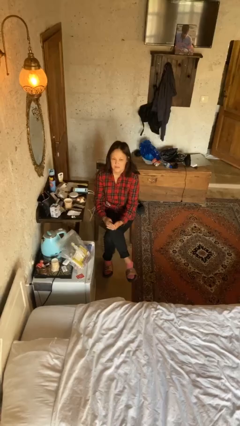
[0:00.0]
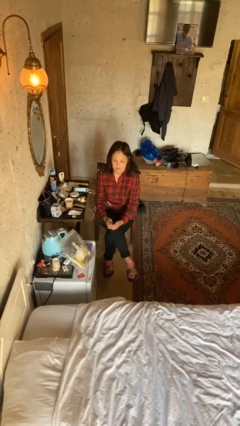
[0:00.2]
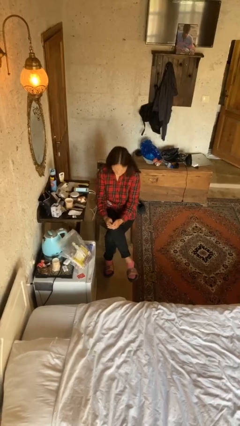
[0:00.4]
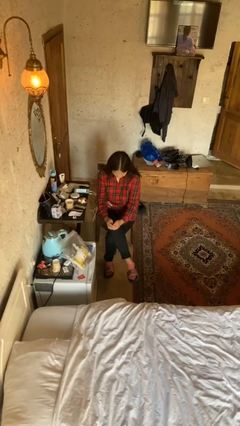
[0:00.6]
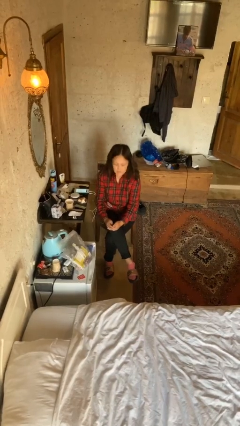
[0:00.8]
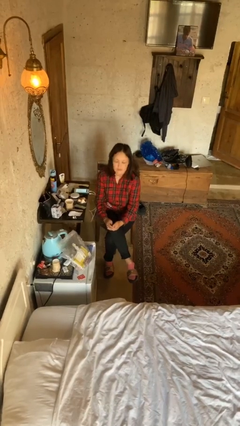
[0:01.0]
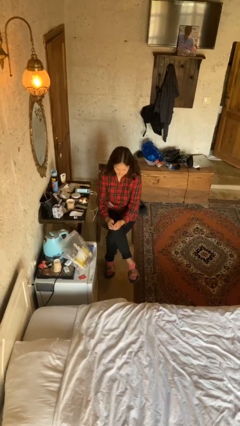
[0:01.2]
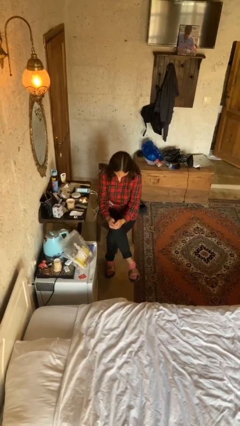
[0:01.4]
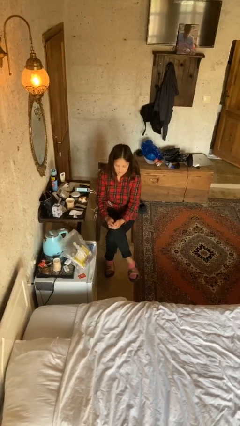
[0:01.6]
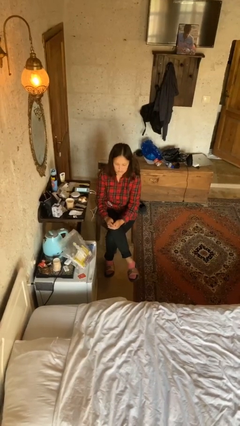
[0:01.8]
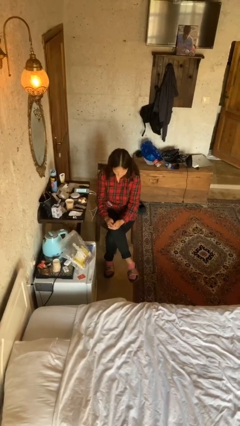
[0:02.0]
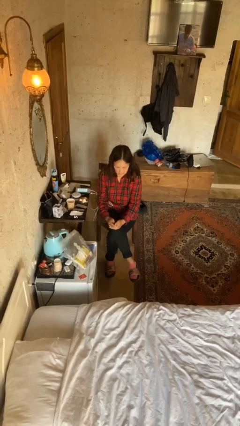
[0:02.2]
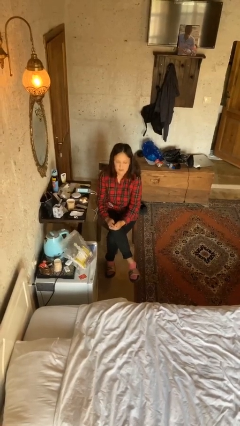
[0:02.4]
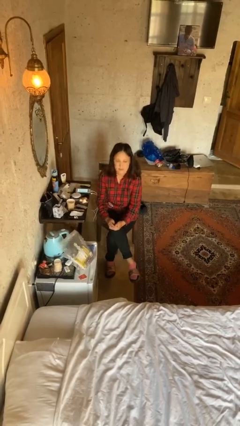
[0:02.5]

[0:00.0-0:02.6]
person nods head

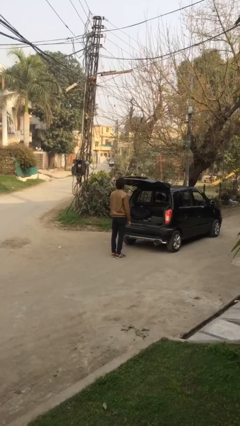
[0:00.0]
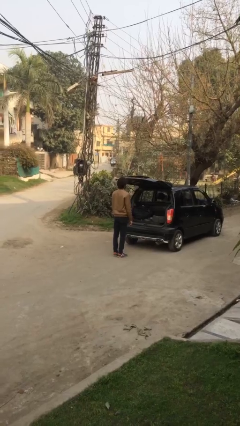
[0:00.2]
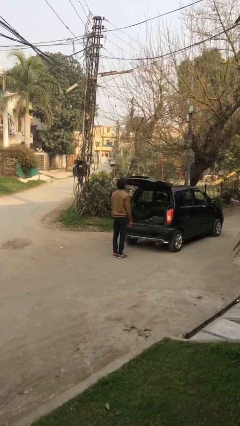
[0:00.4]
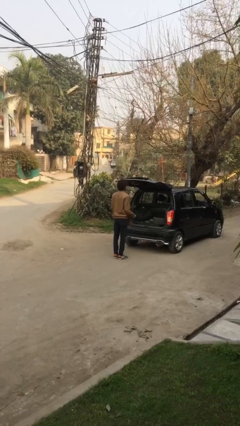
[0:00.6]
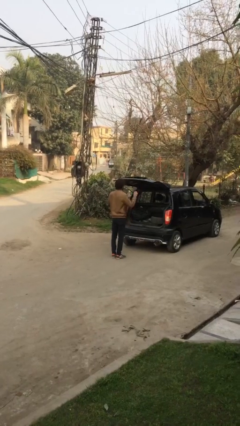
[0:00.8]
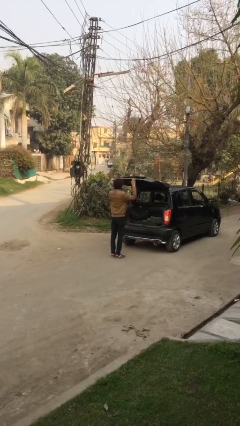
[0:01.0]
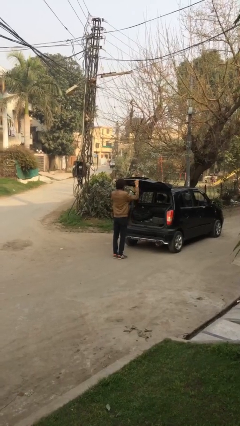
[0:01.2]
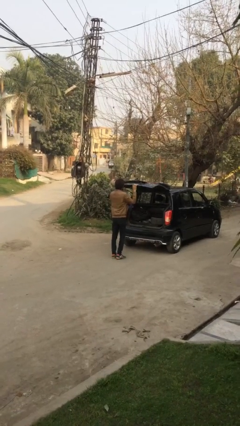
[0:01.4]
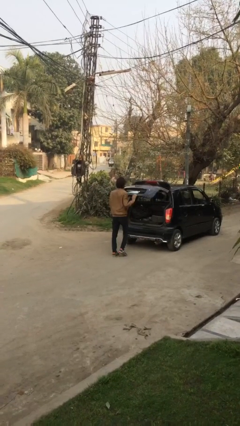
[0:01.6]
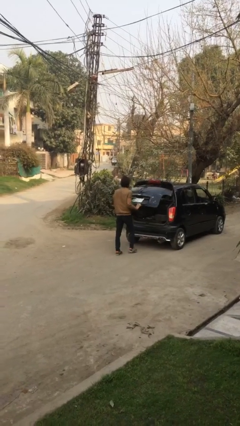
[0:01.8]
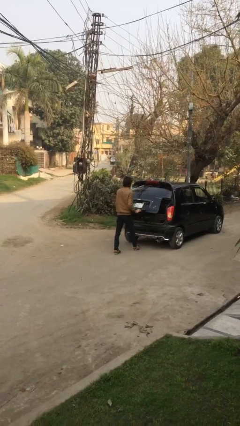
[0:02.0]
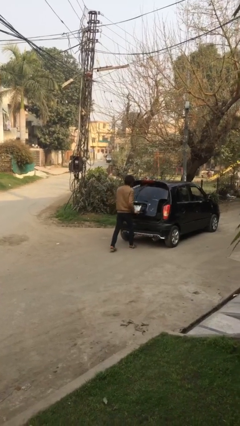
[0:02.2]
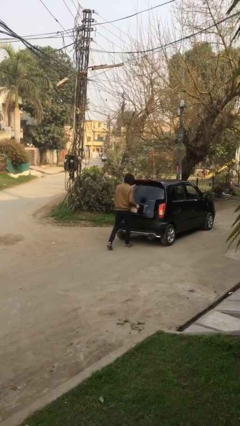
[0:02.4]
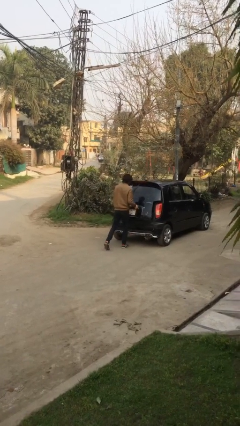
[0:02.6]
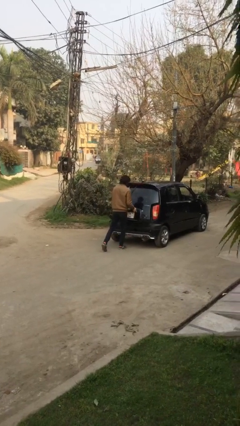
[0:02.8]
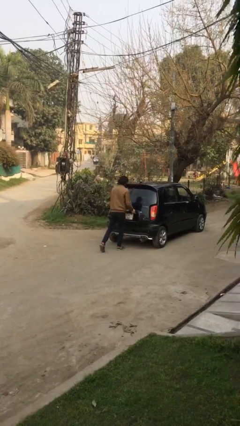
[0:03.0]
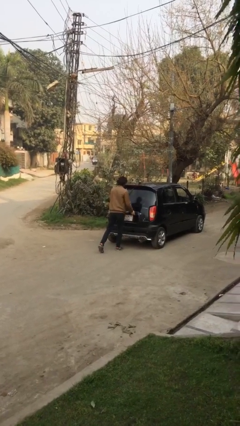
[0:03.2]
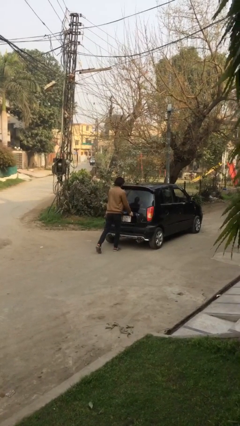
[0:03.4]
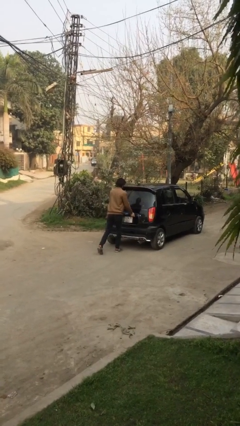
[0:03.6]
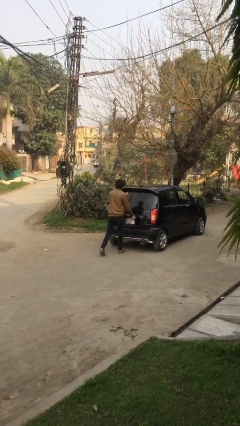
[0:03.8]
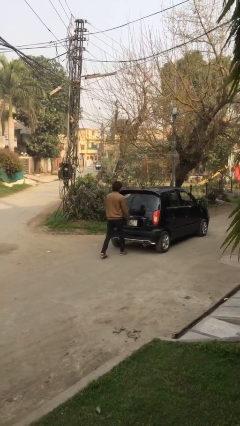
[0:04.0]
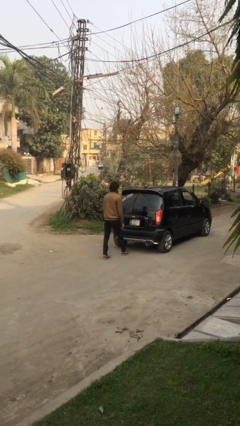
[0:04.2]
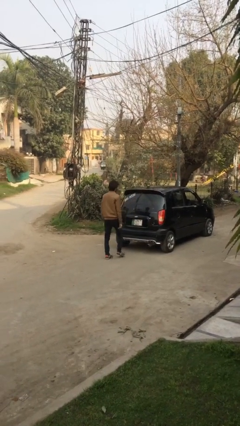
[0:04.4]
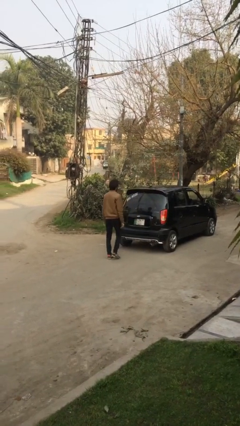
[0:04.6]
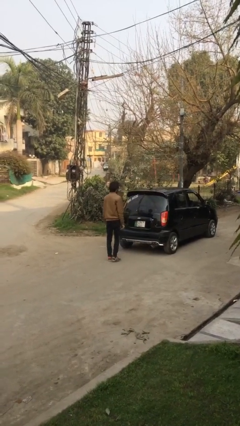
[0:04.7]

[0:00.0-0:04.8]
person closes car trunk

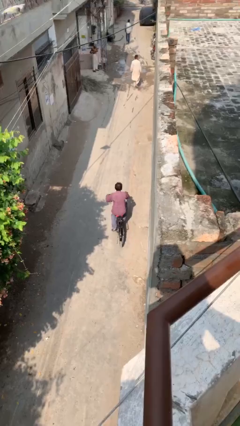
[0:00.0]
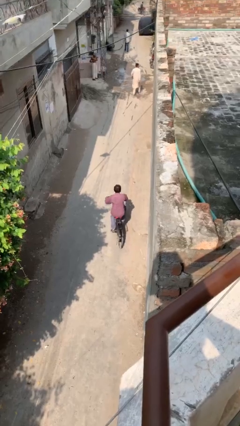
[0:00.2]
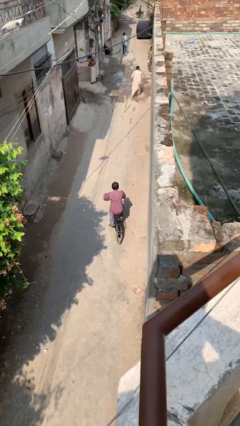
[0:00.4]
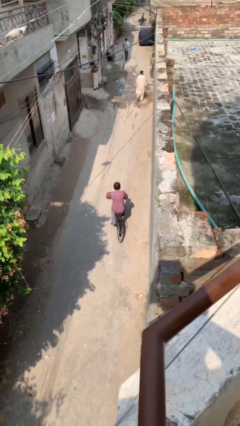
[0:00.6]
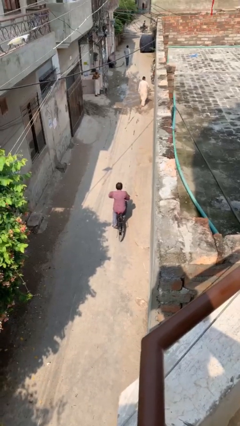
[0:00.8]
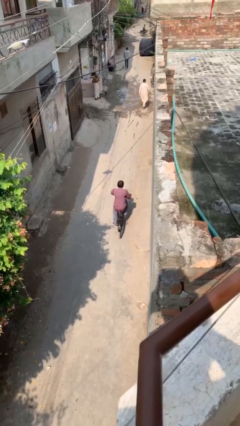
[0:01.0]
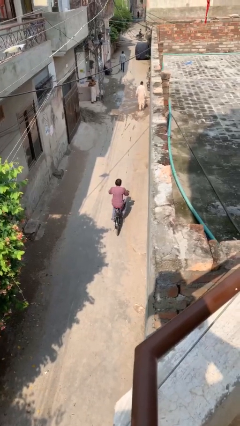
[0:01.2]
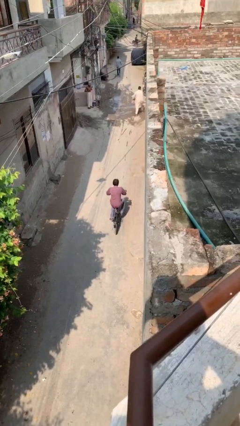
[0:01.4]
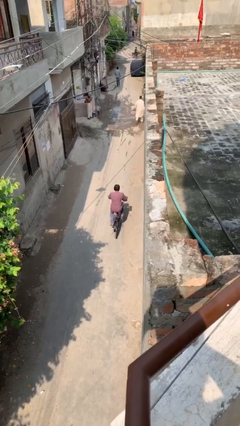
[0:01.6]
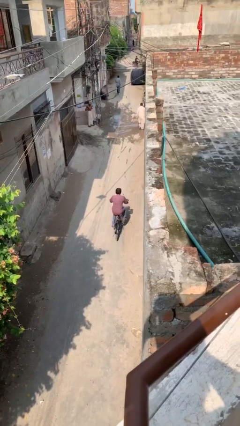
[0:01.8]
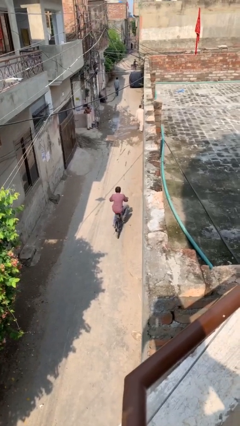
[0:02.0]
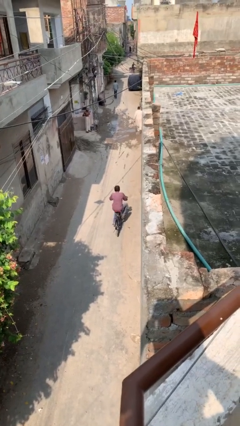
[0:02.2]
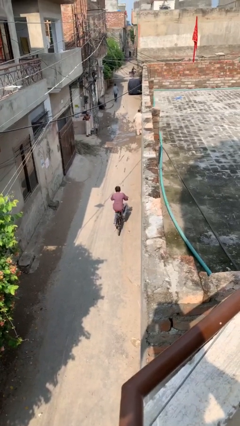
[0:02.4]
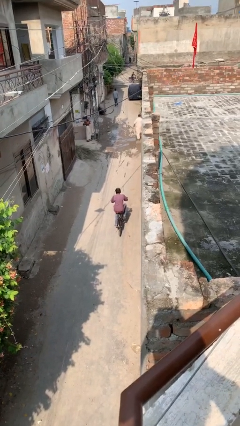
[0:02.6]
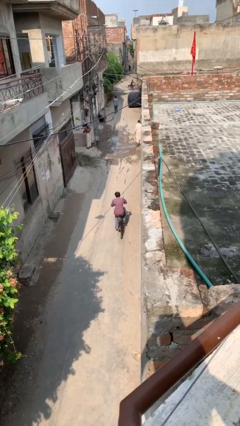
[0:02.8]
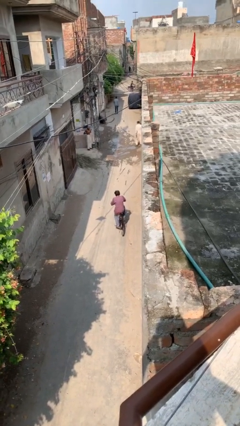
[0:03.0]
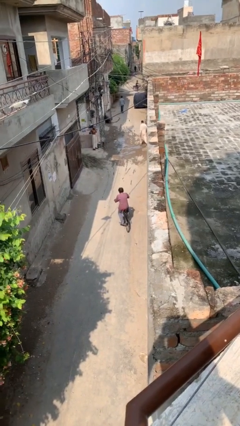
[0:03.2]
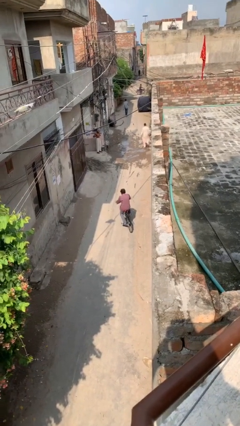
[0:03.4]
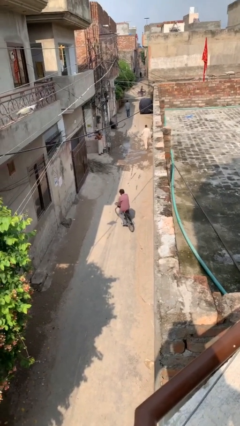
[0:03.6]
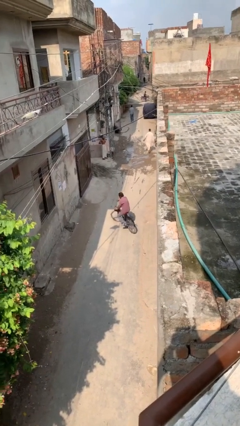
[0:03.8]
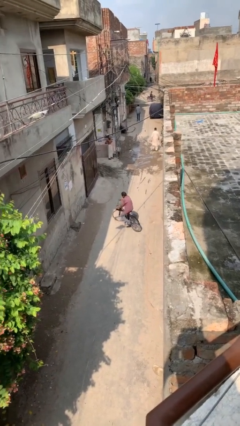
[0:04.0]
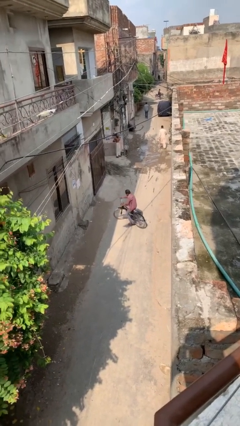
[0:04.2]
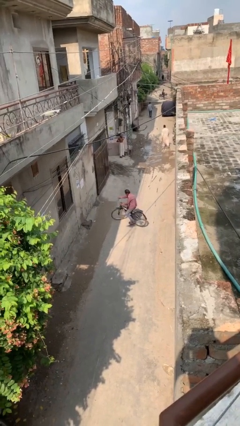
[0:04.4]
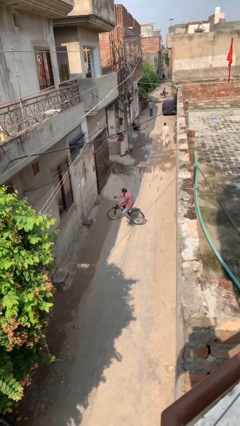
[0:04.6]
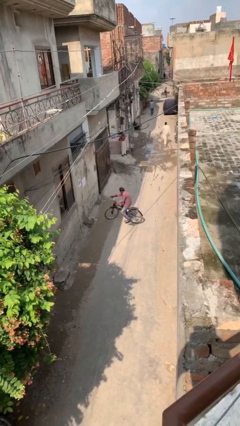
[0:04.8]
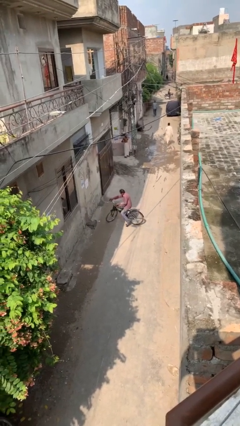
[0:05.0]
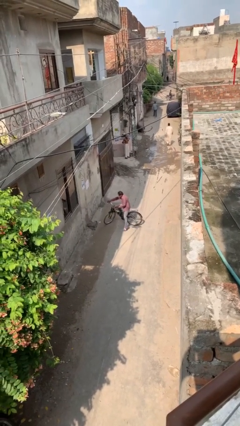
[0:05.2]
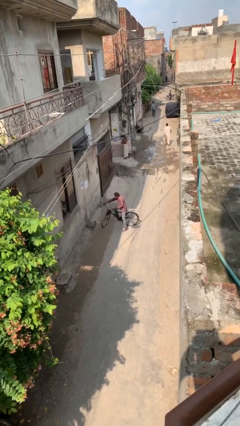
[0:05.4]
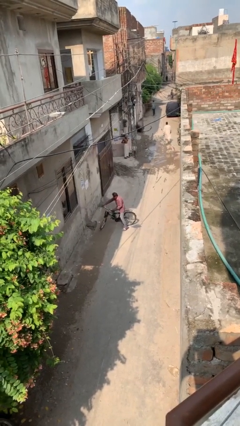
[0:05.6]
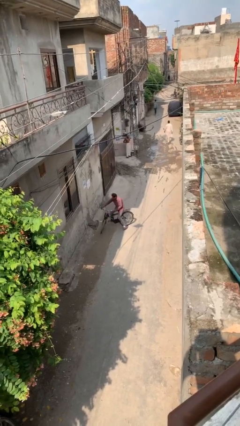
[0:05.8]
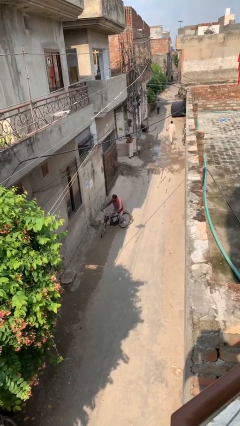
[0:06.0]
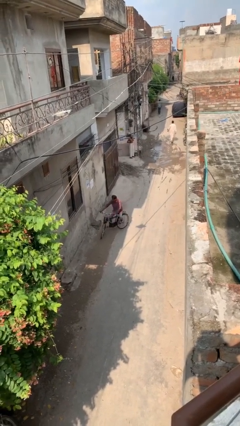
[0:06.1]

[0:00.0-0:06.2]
person rides bicycle

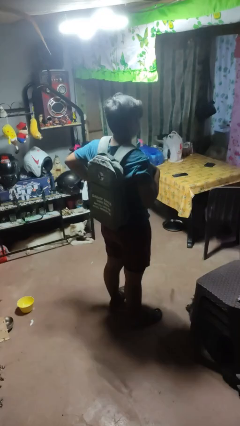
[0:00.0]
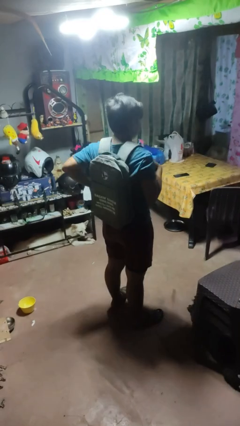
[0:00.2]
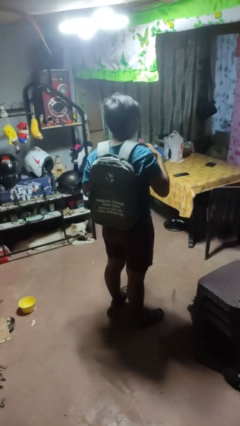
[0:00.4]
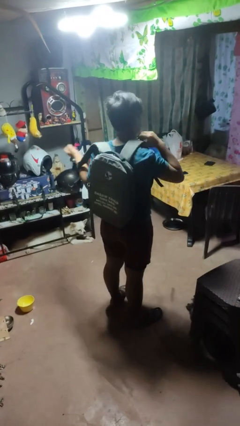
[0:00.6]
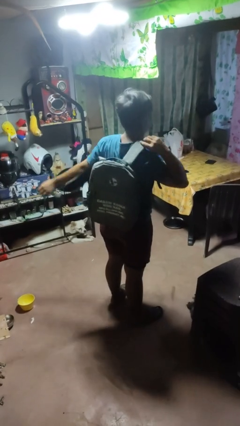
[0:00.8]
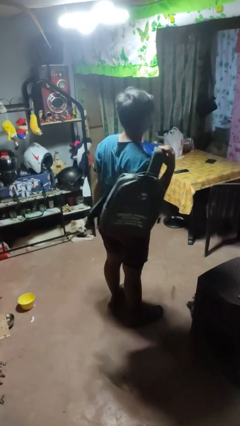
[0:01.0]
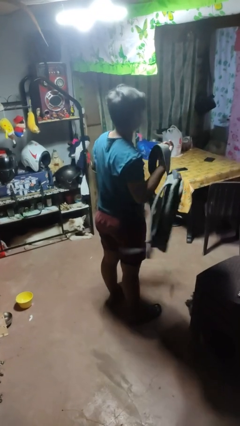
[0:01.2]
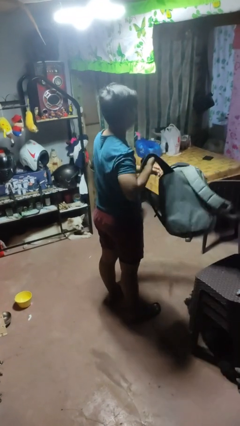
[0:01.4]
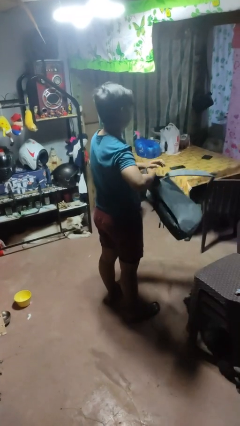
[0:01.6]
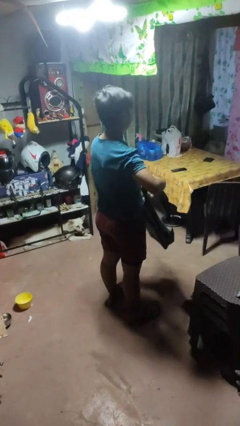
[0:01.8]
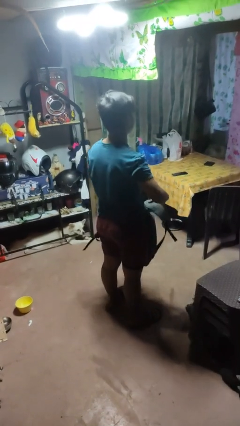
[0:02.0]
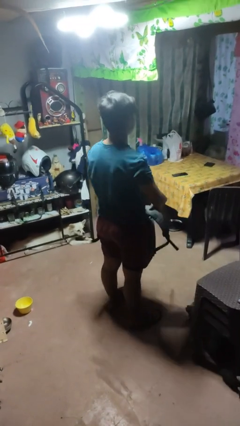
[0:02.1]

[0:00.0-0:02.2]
person takes off backpack

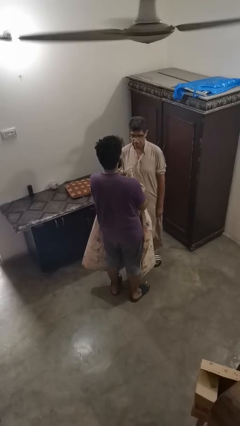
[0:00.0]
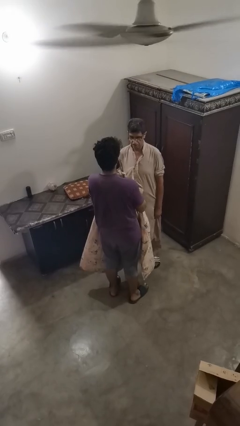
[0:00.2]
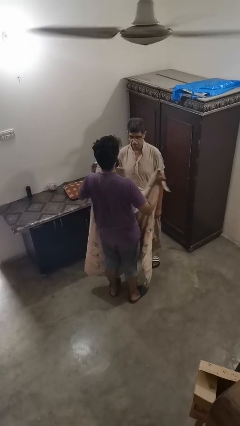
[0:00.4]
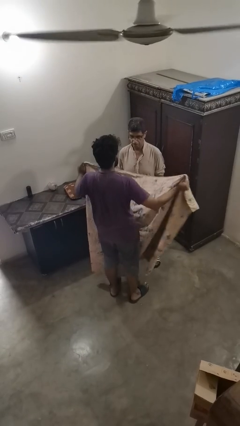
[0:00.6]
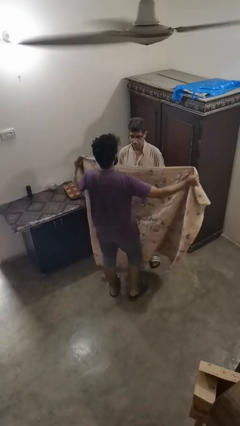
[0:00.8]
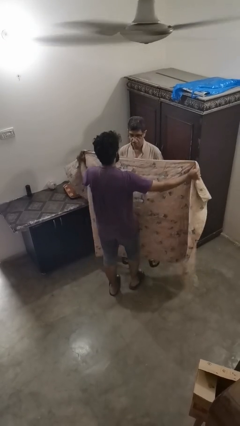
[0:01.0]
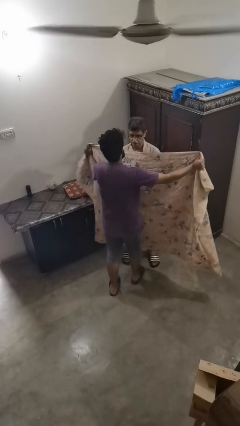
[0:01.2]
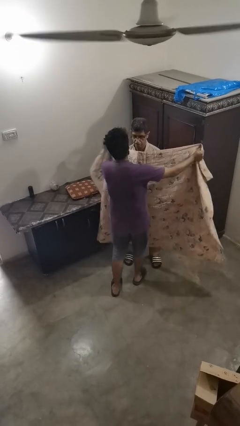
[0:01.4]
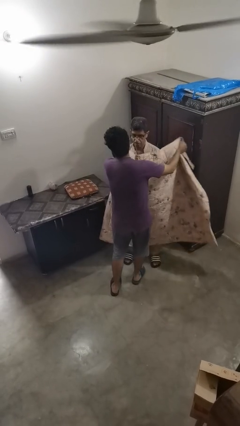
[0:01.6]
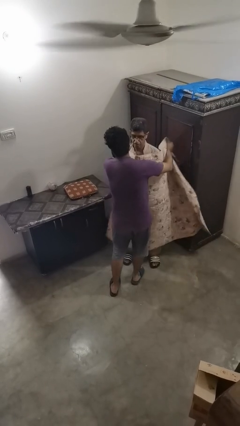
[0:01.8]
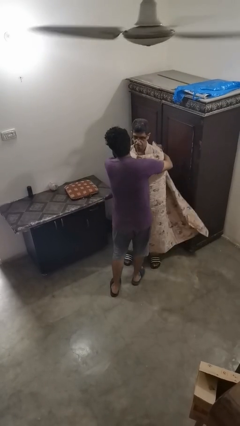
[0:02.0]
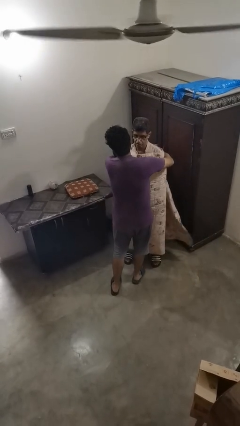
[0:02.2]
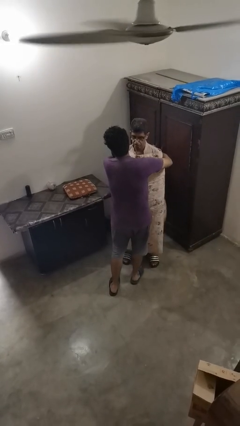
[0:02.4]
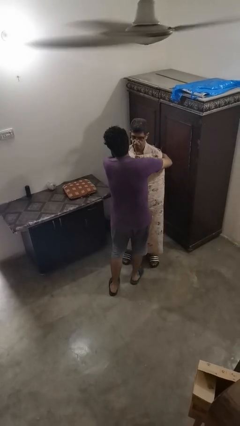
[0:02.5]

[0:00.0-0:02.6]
person covers friend with blanket
